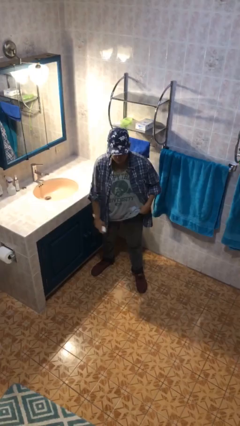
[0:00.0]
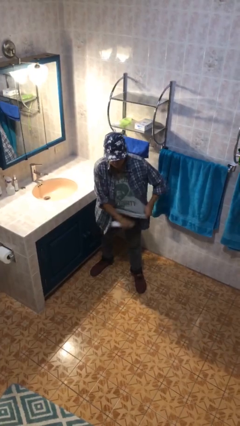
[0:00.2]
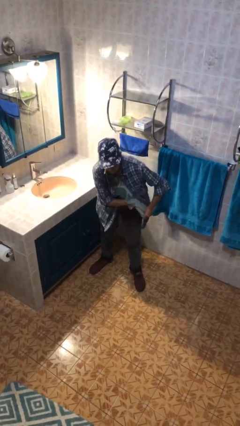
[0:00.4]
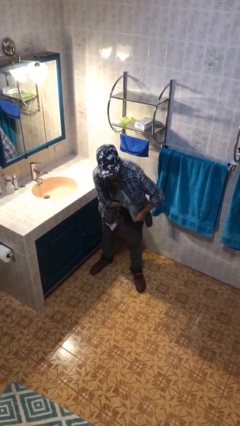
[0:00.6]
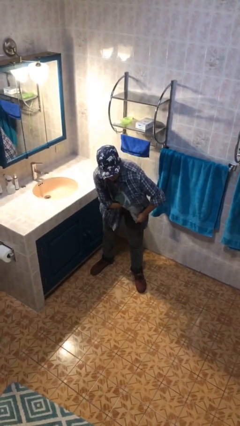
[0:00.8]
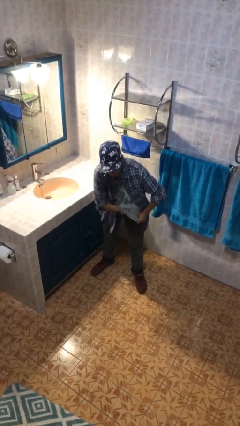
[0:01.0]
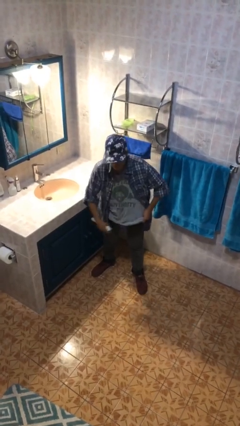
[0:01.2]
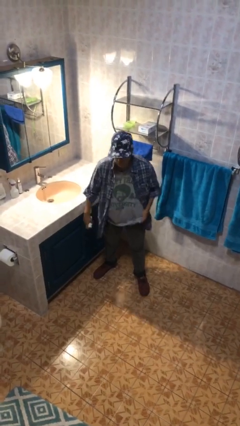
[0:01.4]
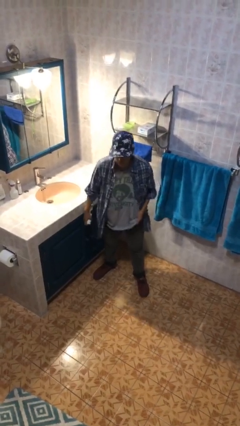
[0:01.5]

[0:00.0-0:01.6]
person applies deodorant

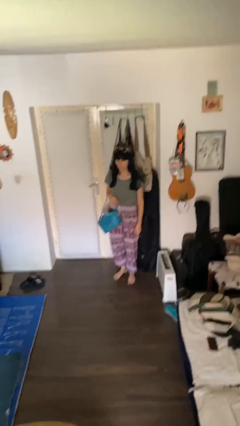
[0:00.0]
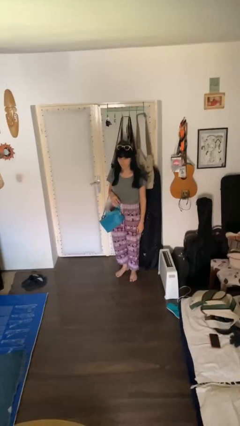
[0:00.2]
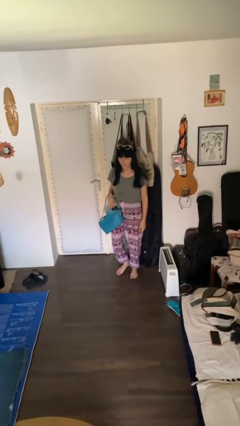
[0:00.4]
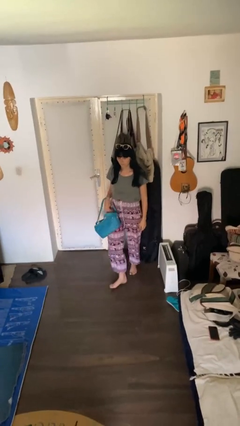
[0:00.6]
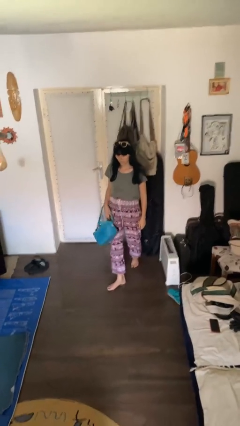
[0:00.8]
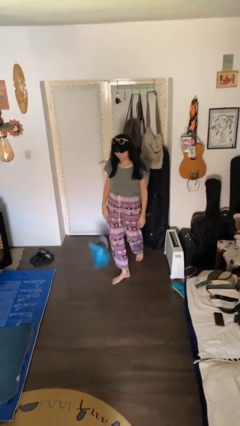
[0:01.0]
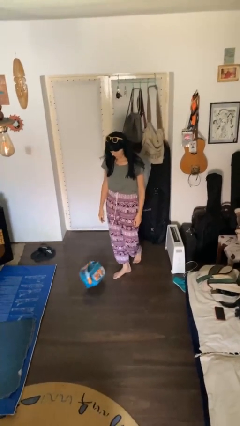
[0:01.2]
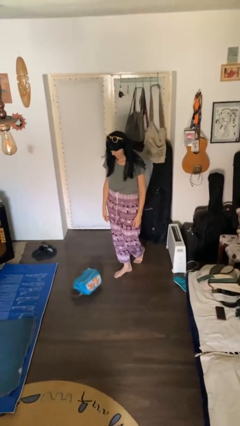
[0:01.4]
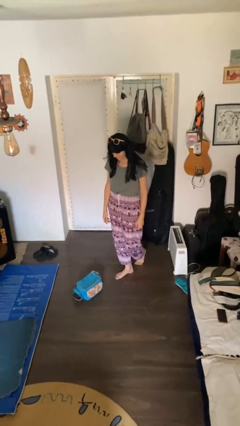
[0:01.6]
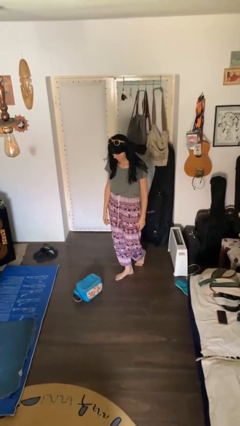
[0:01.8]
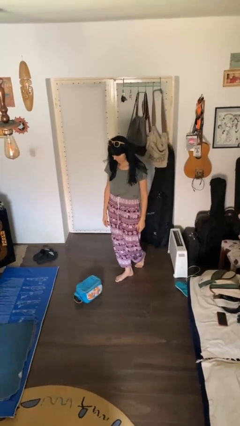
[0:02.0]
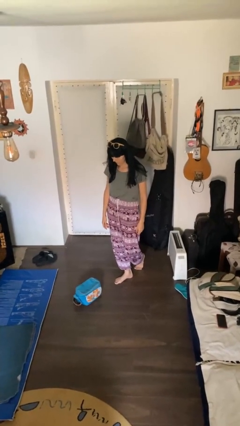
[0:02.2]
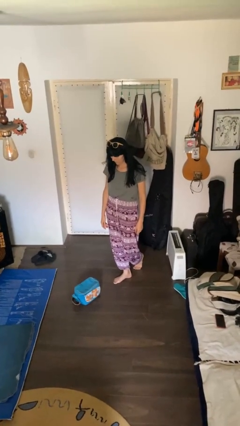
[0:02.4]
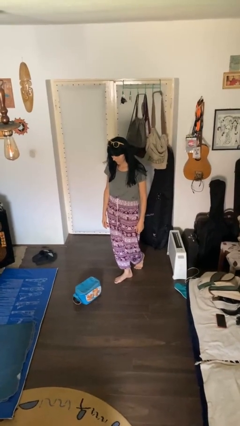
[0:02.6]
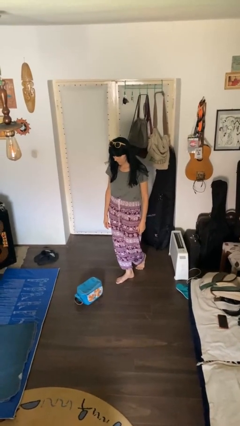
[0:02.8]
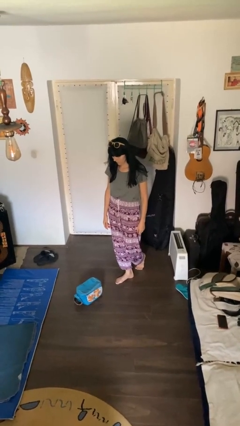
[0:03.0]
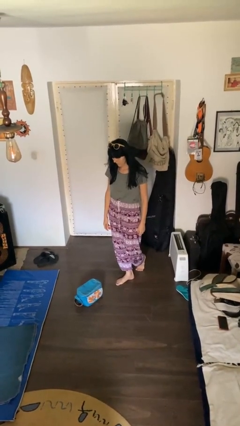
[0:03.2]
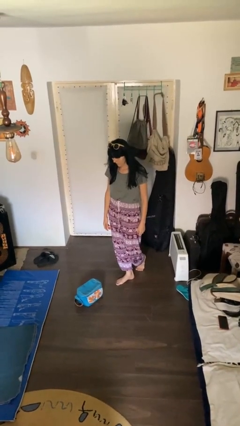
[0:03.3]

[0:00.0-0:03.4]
person drops object

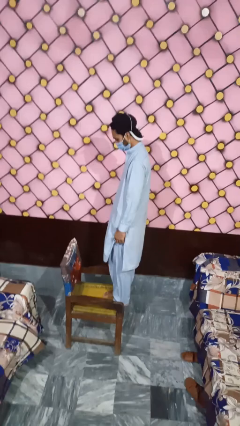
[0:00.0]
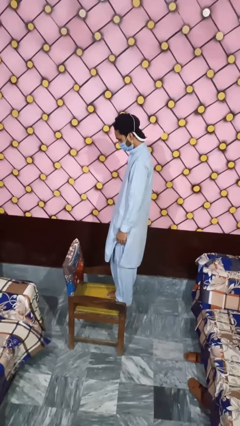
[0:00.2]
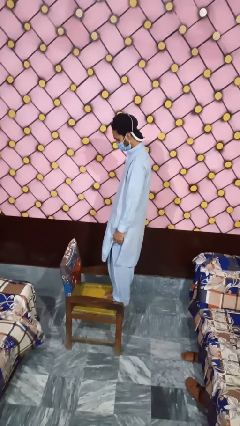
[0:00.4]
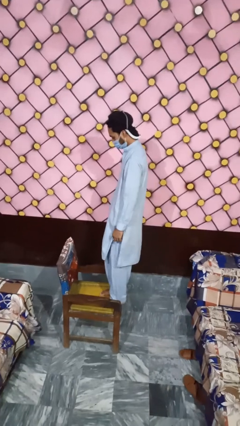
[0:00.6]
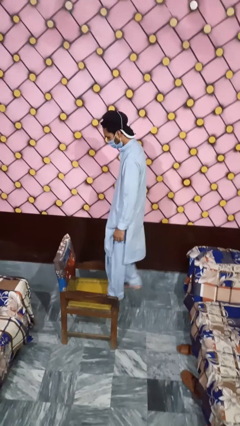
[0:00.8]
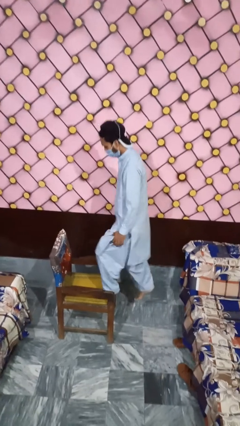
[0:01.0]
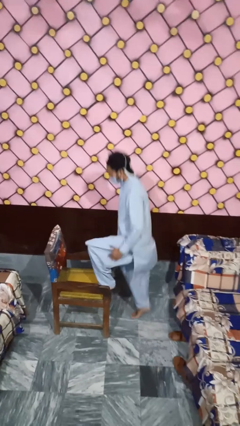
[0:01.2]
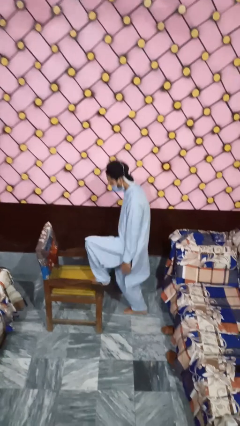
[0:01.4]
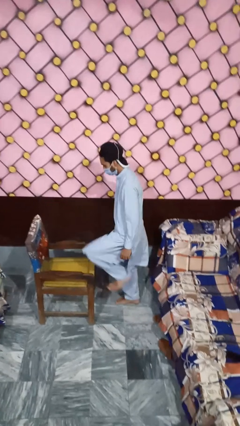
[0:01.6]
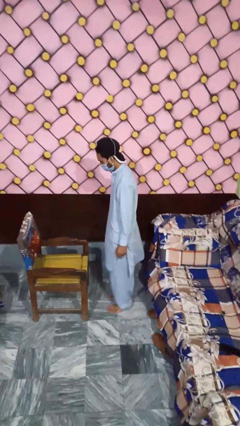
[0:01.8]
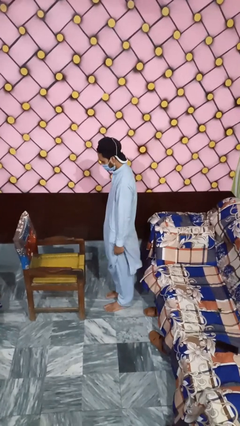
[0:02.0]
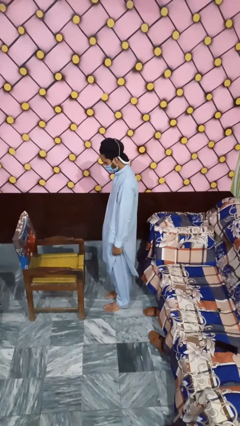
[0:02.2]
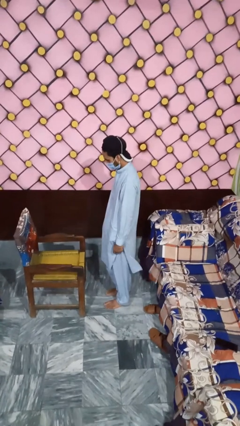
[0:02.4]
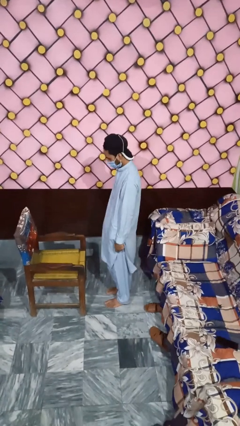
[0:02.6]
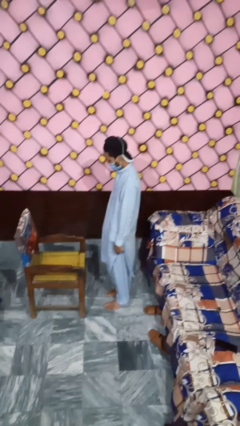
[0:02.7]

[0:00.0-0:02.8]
person climbs off chair

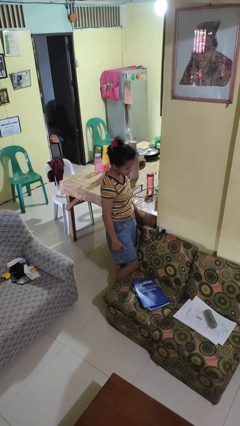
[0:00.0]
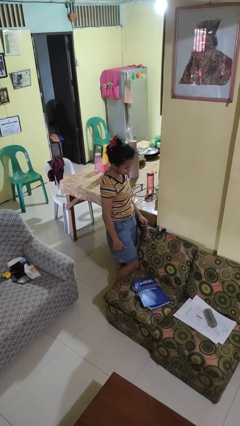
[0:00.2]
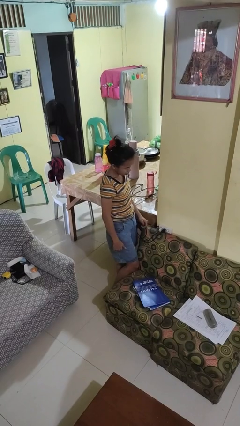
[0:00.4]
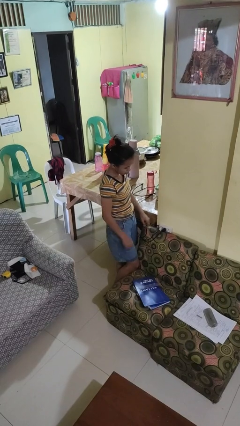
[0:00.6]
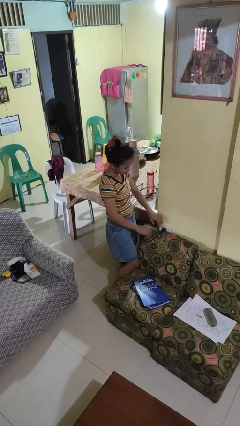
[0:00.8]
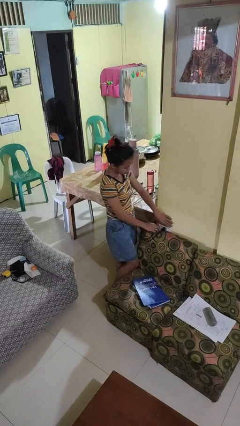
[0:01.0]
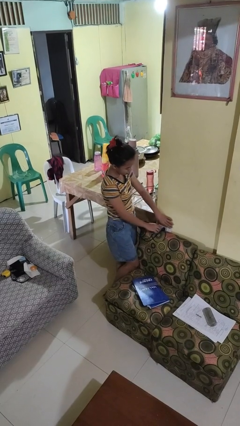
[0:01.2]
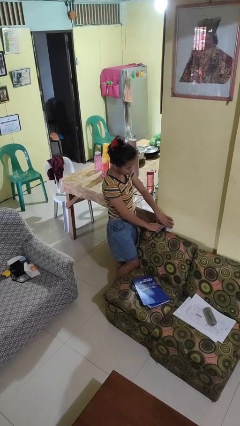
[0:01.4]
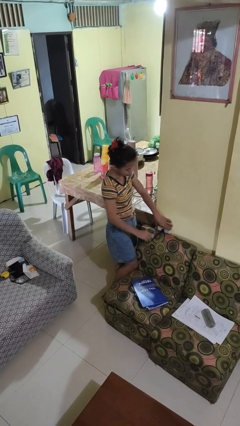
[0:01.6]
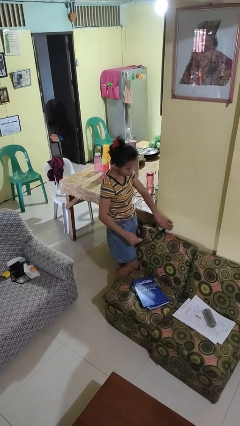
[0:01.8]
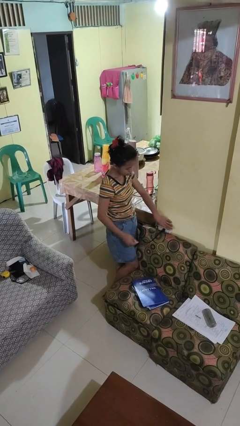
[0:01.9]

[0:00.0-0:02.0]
person unplugs from electrical socket

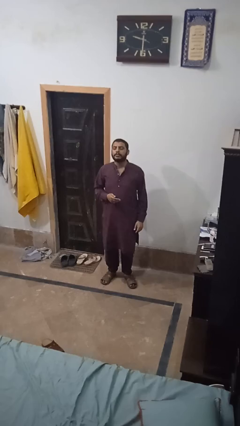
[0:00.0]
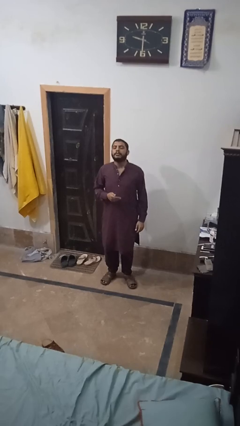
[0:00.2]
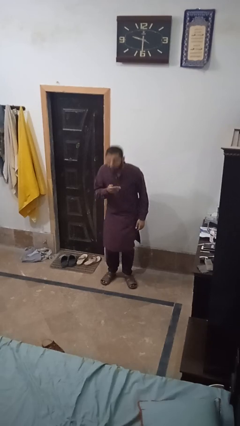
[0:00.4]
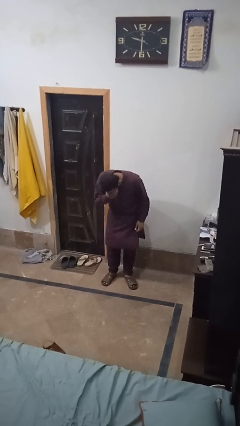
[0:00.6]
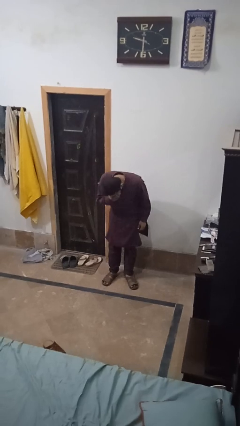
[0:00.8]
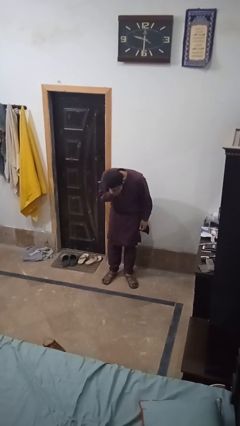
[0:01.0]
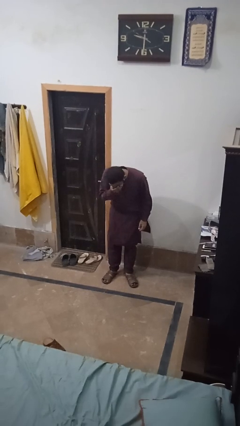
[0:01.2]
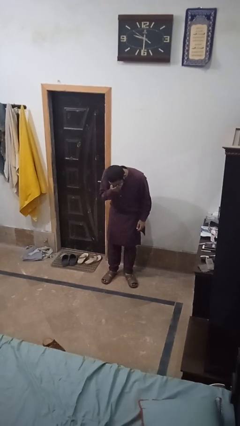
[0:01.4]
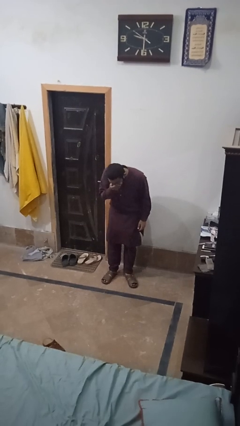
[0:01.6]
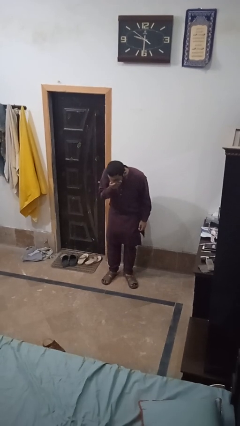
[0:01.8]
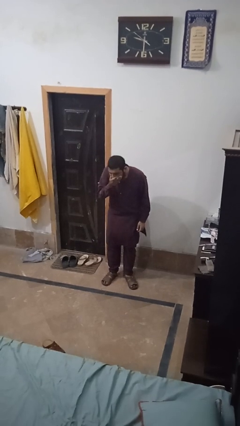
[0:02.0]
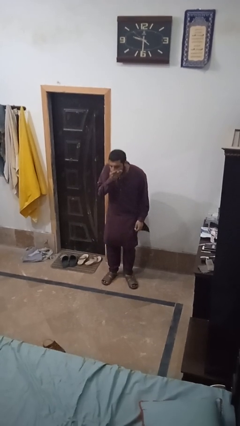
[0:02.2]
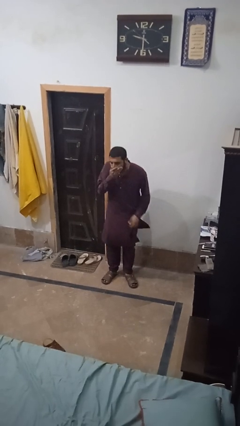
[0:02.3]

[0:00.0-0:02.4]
person sneezes into hand

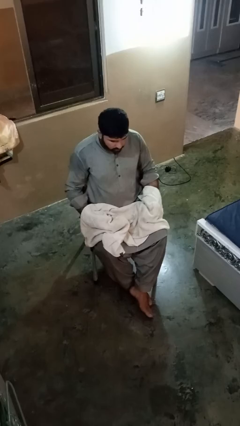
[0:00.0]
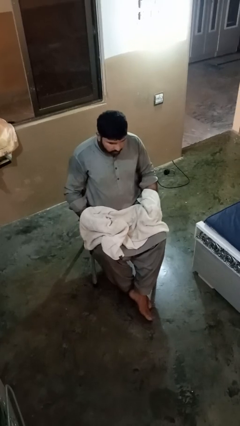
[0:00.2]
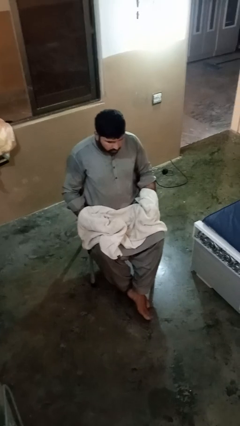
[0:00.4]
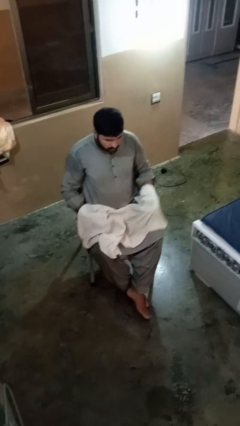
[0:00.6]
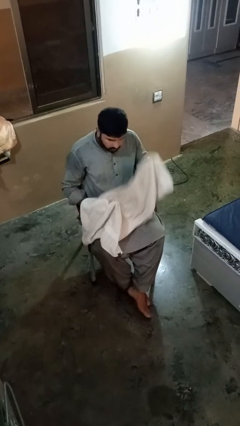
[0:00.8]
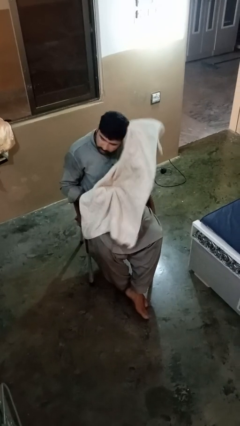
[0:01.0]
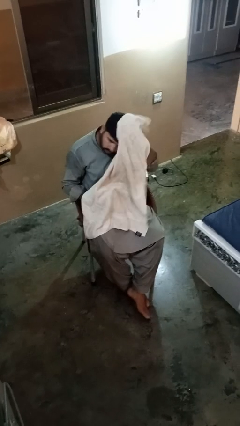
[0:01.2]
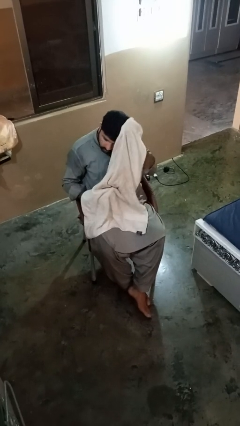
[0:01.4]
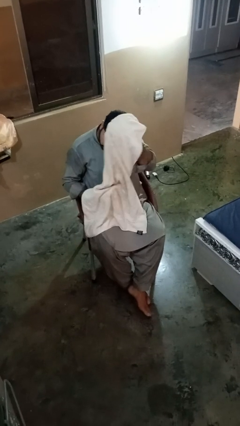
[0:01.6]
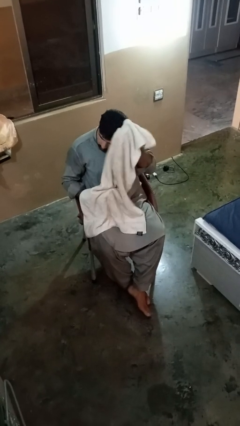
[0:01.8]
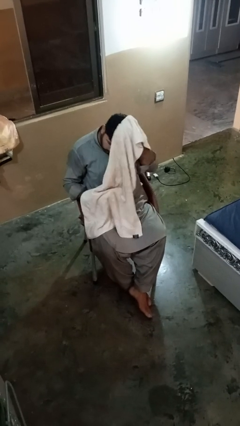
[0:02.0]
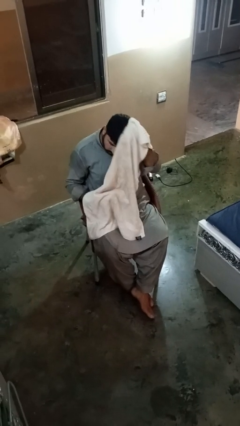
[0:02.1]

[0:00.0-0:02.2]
person dries hair with towel

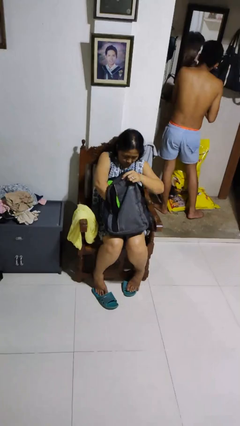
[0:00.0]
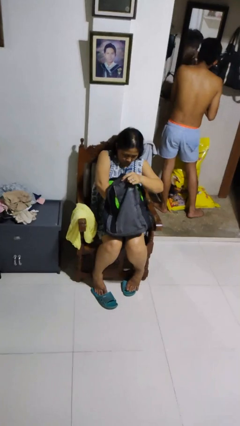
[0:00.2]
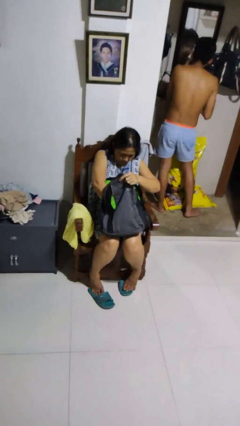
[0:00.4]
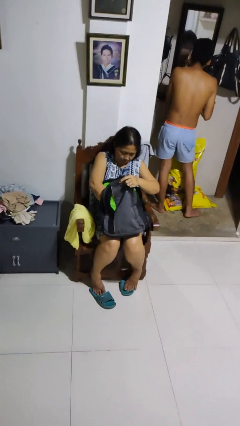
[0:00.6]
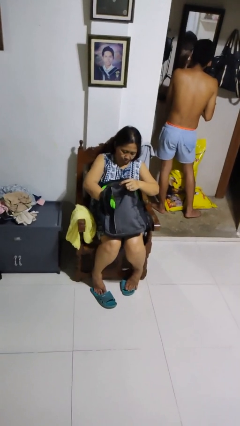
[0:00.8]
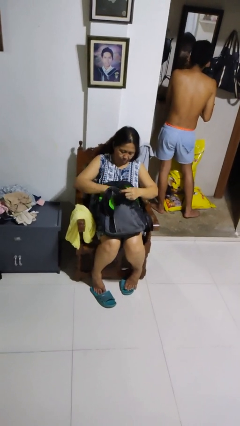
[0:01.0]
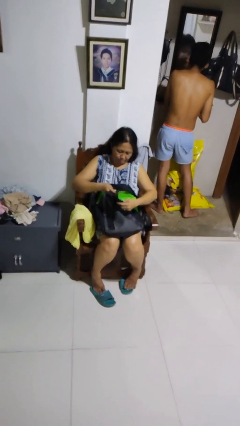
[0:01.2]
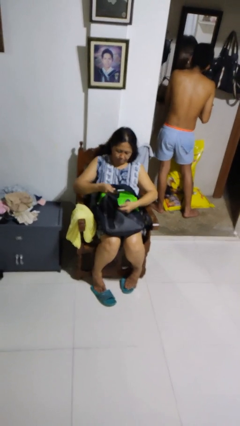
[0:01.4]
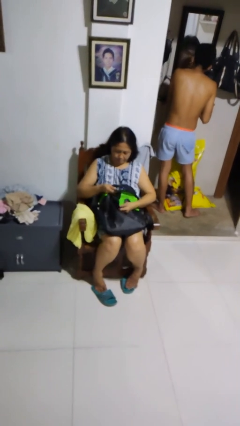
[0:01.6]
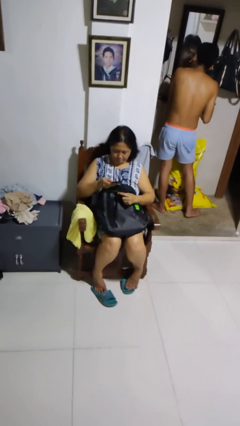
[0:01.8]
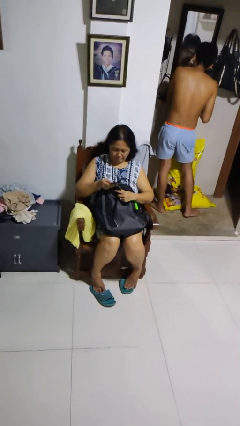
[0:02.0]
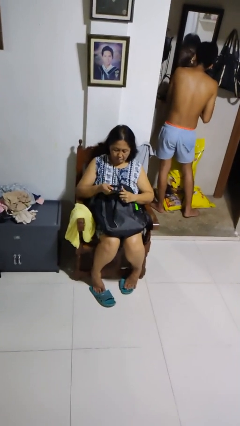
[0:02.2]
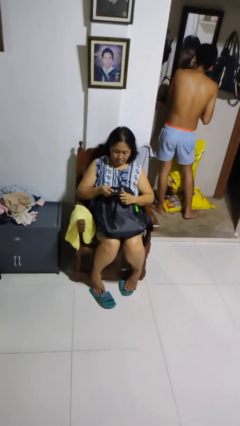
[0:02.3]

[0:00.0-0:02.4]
person takes object from backpack
